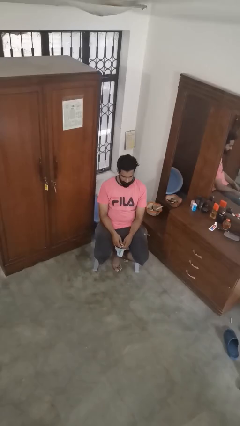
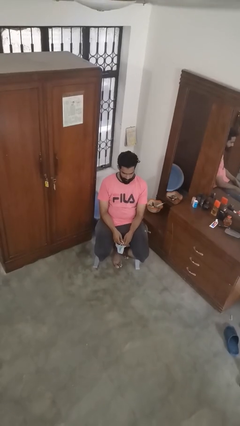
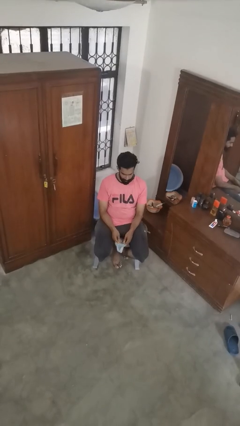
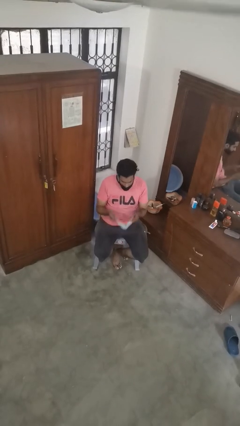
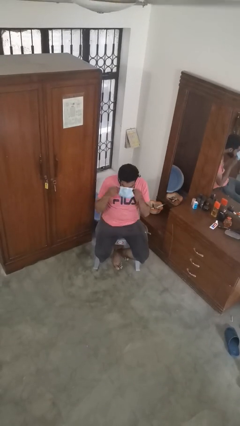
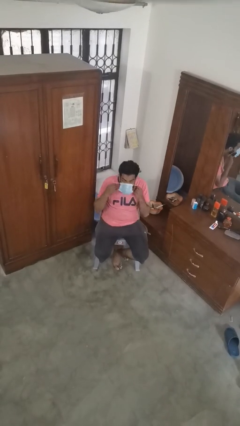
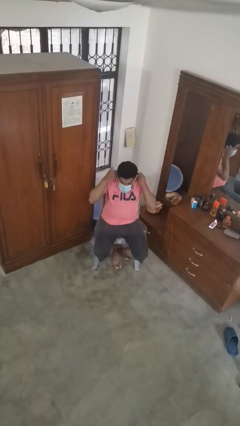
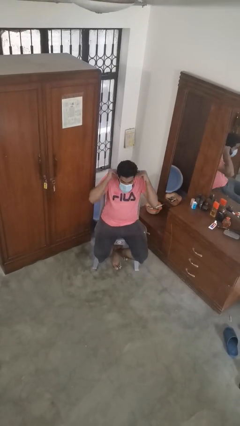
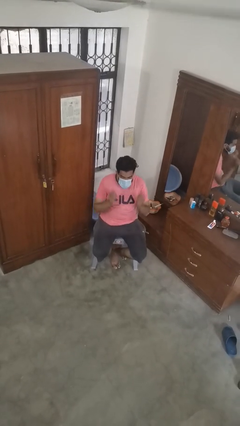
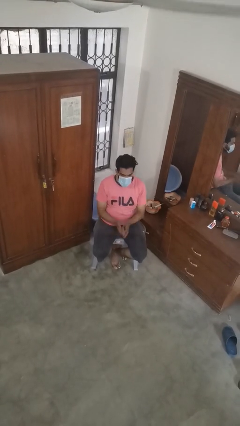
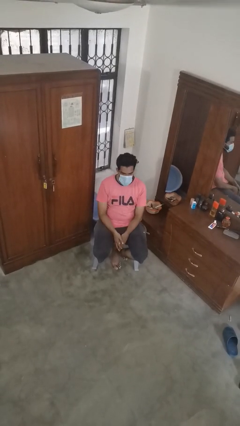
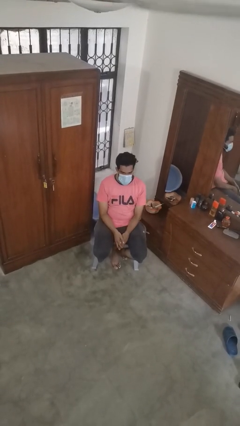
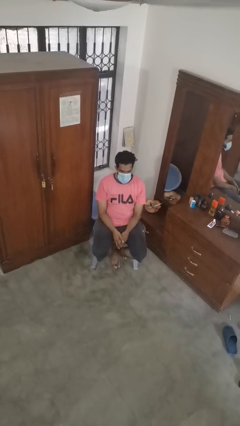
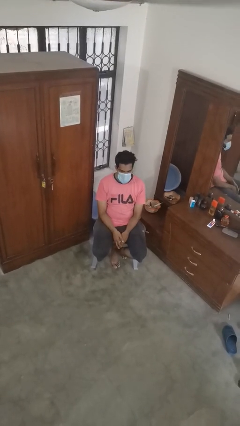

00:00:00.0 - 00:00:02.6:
person puts on facemask

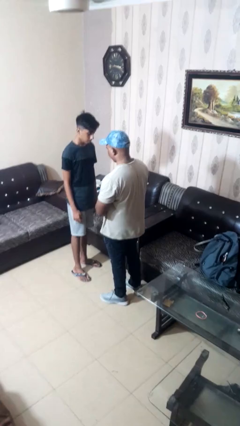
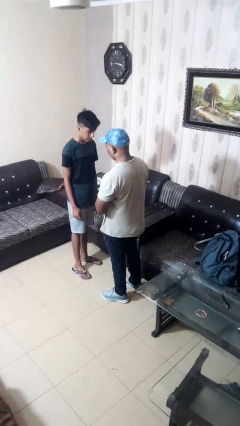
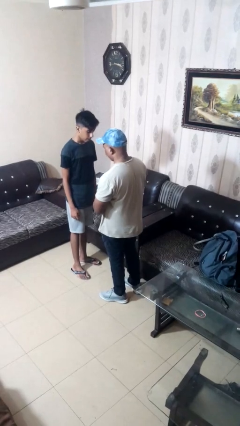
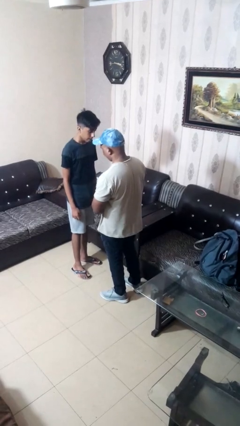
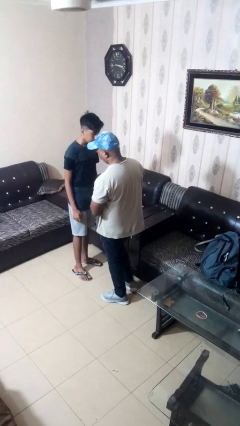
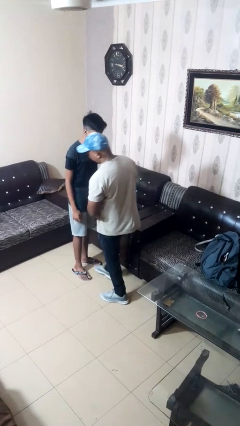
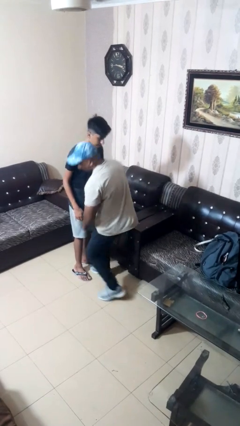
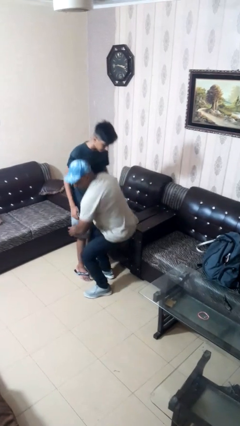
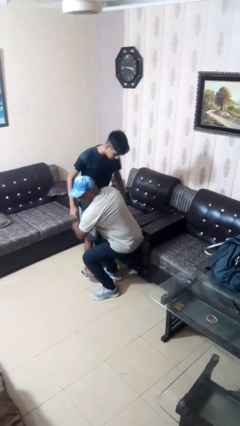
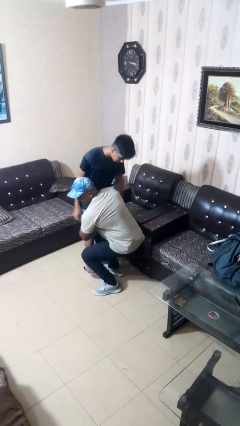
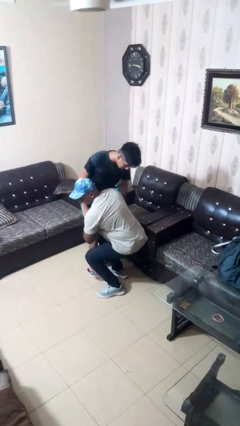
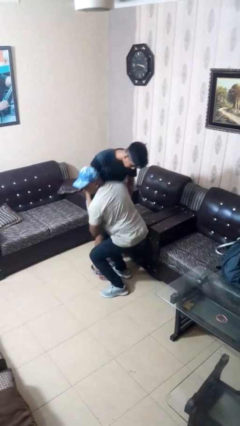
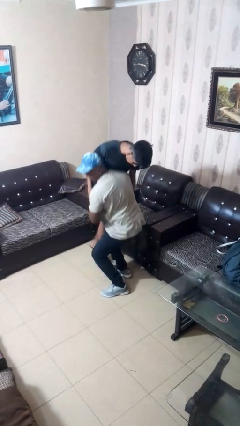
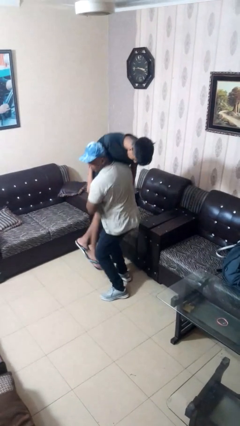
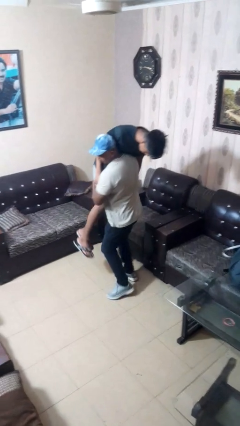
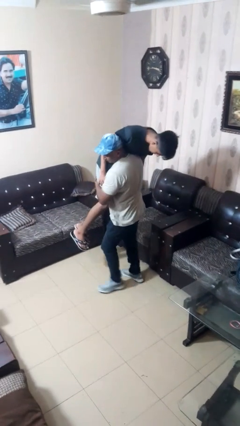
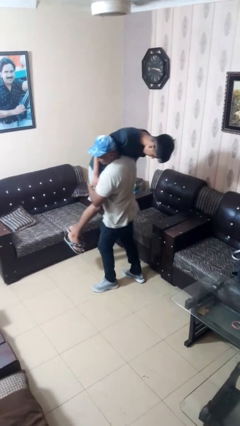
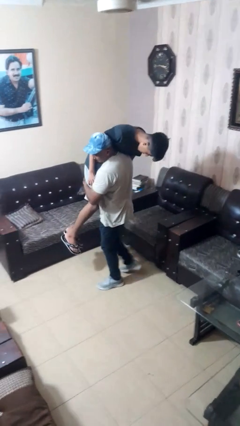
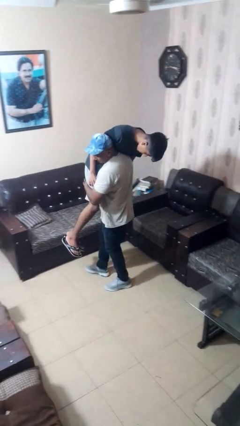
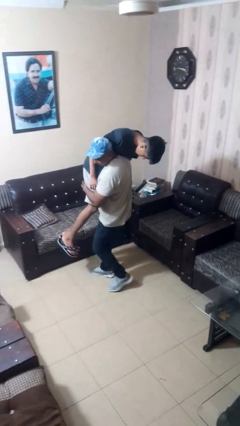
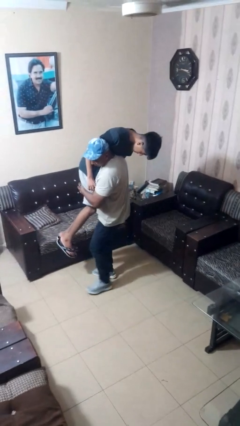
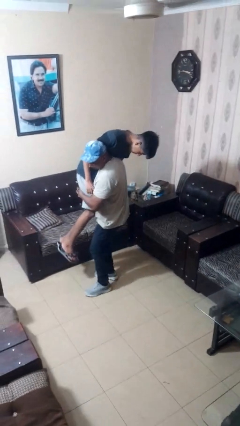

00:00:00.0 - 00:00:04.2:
person carries person over shoulder

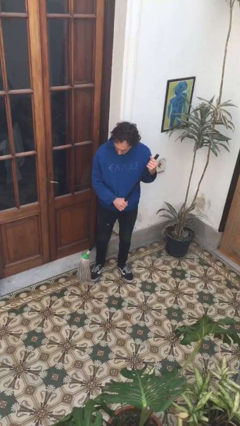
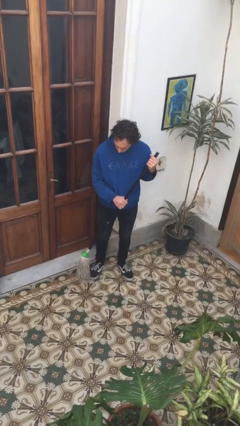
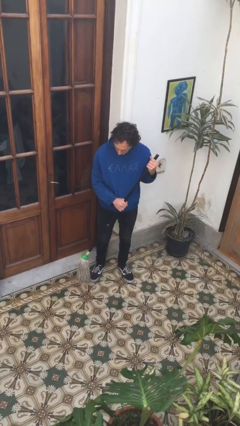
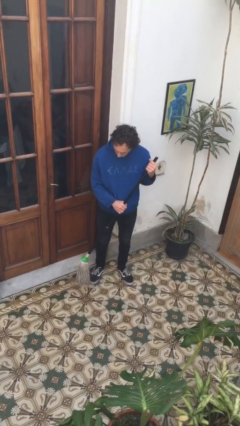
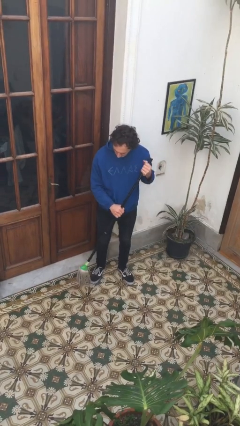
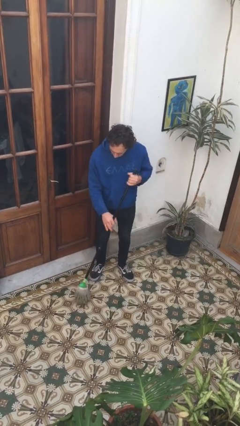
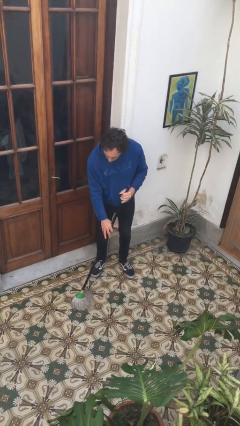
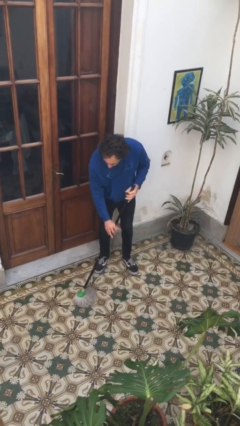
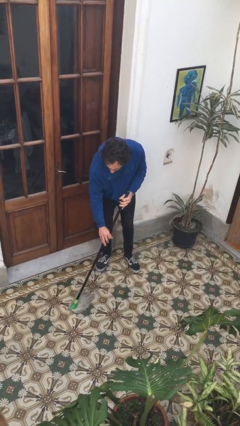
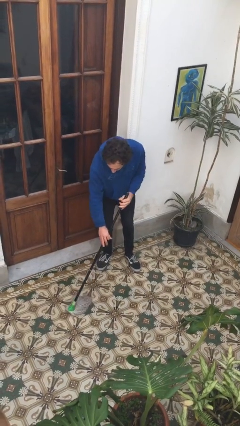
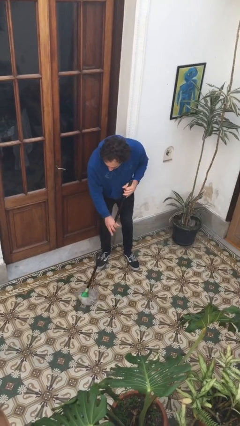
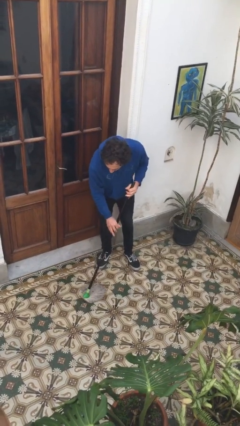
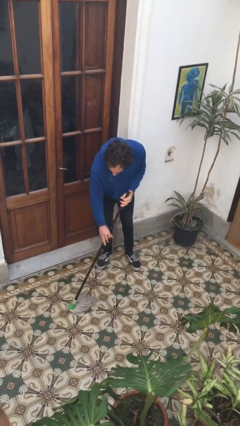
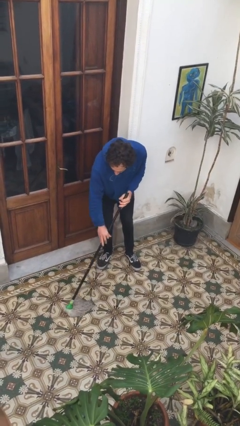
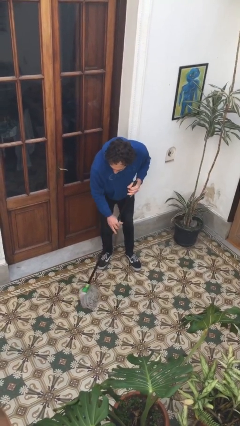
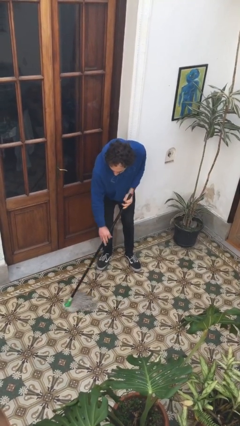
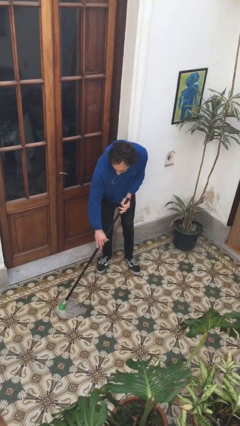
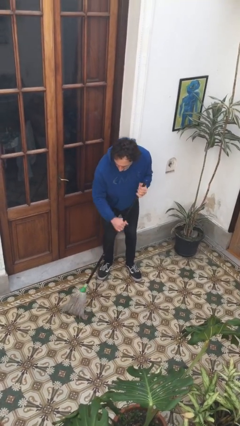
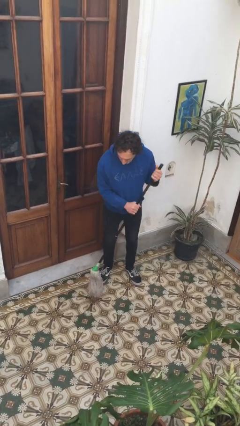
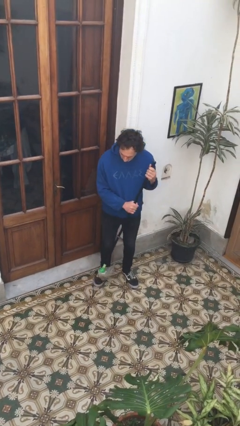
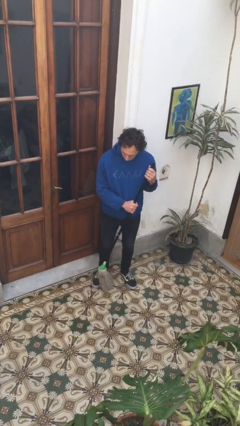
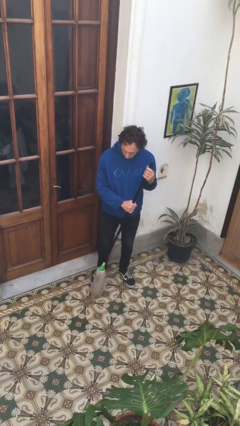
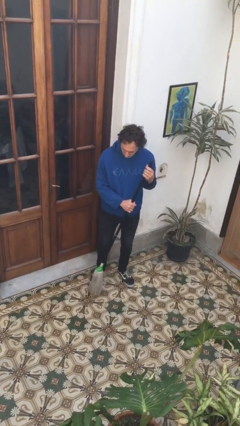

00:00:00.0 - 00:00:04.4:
person mops

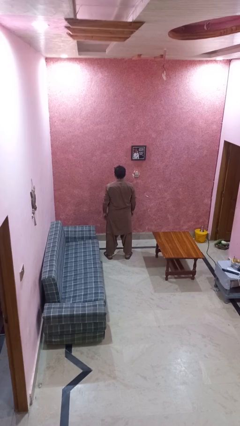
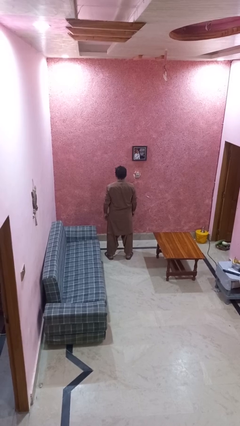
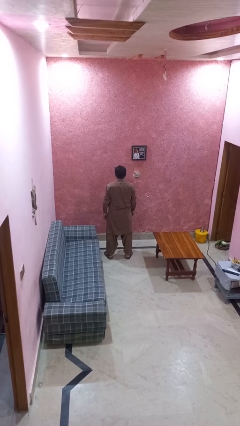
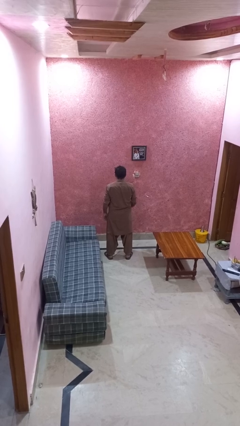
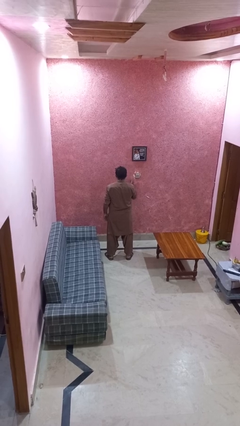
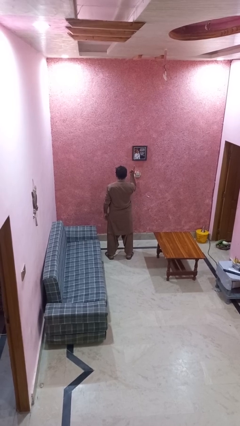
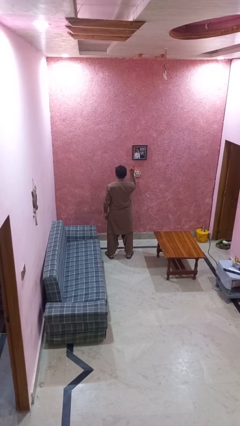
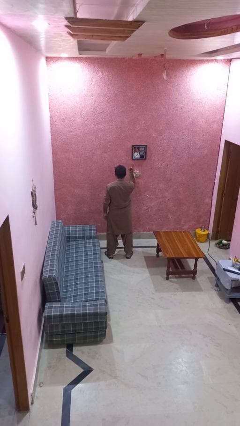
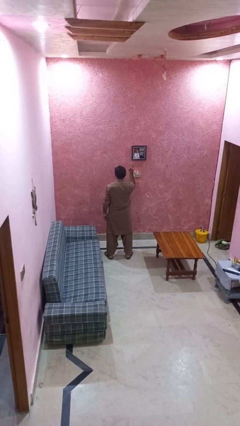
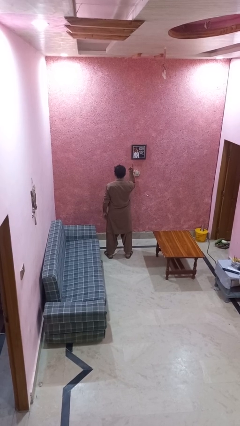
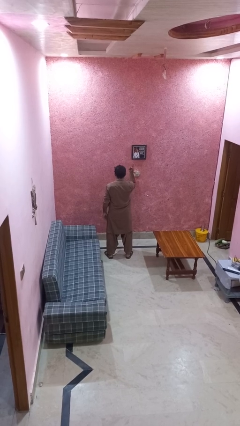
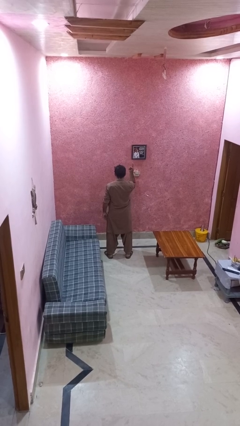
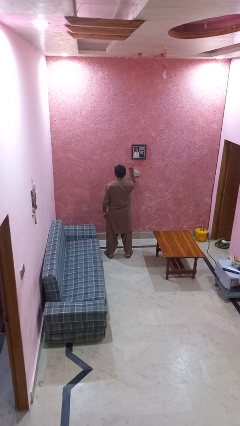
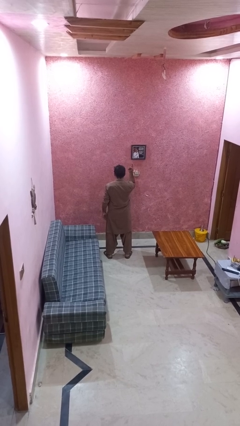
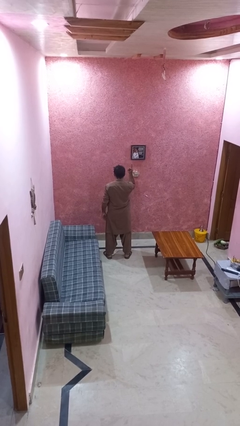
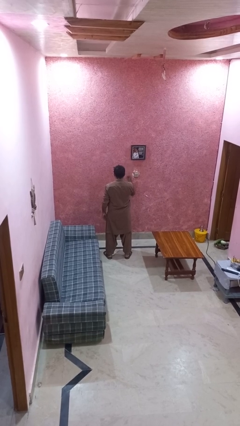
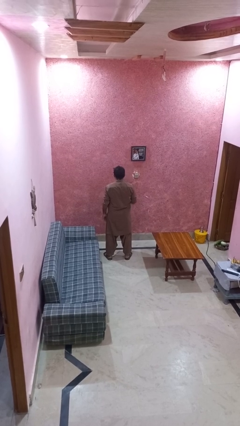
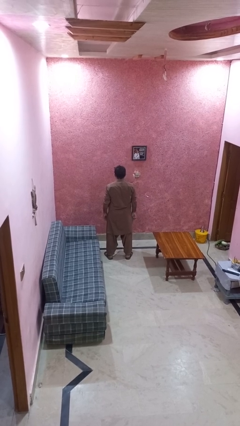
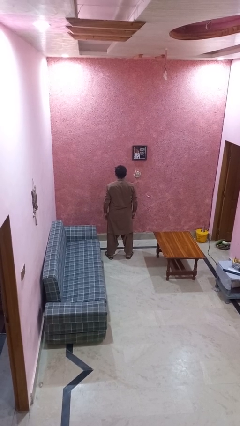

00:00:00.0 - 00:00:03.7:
person gestures number one

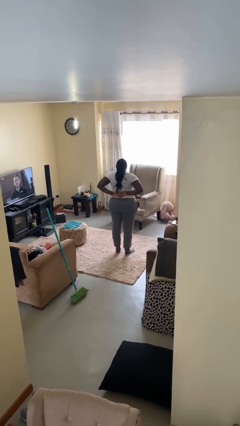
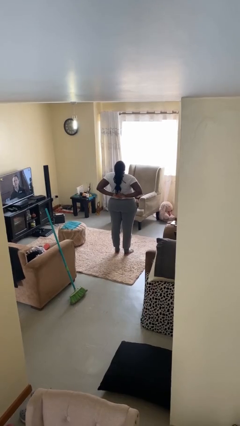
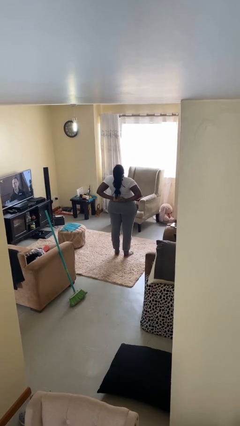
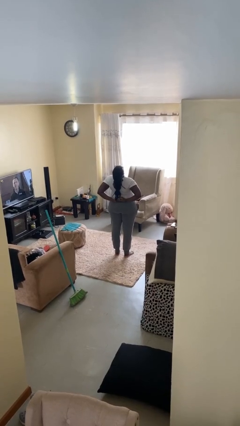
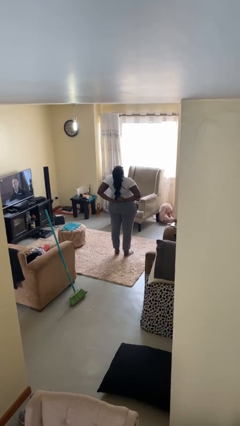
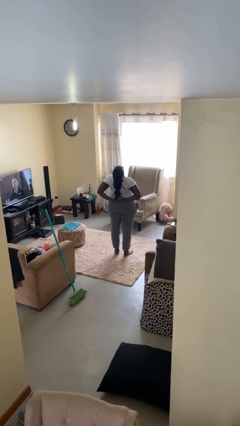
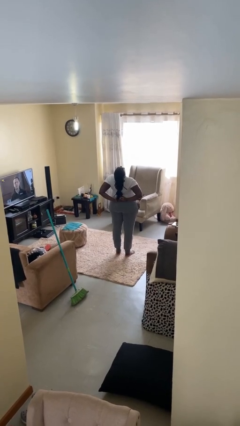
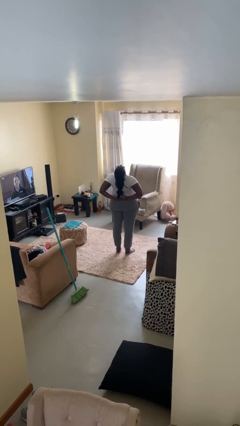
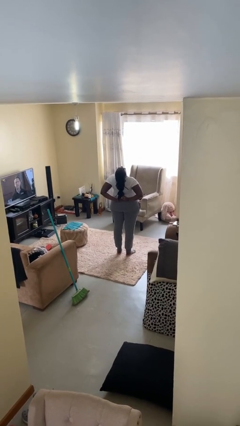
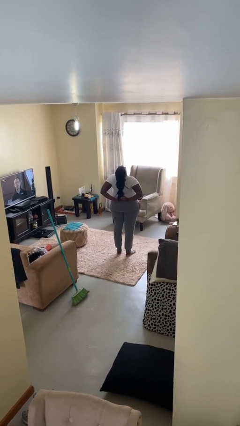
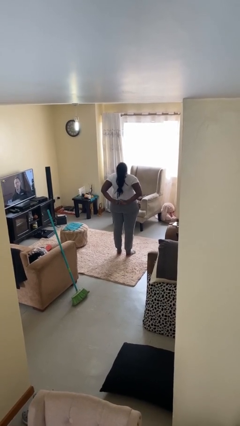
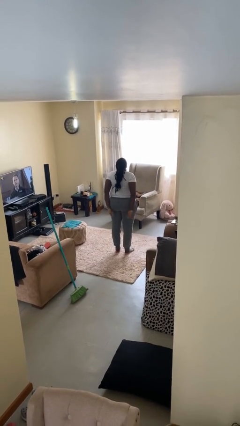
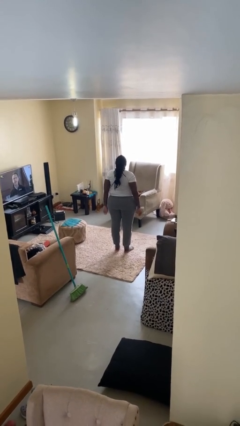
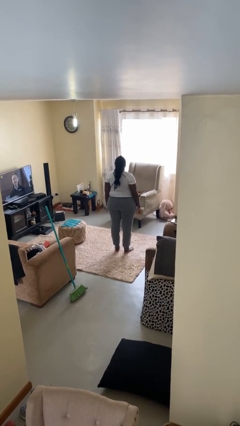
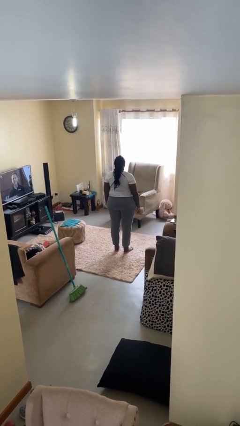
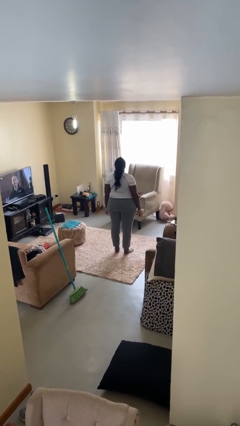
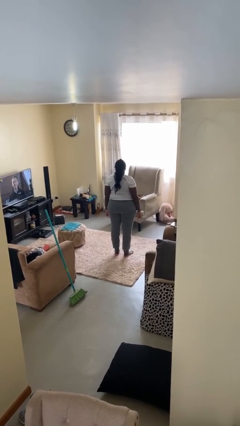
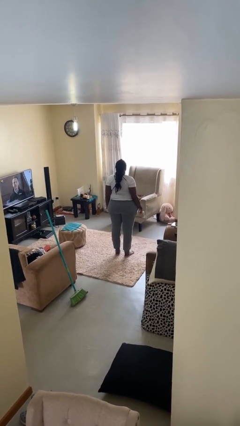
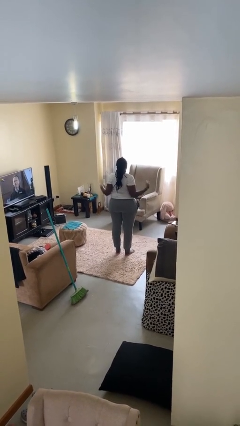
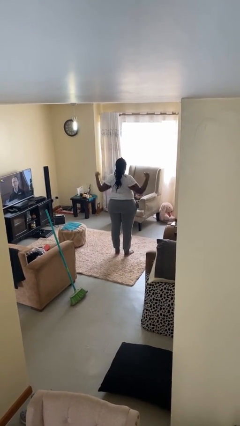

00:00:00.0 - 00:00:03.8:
person stretches back
